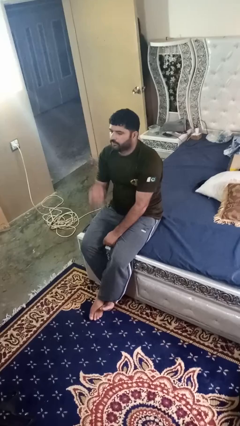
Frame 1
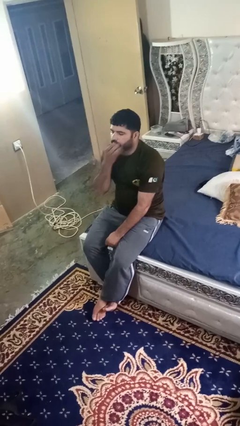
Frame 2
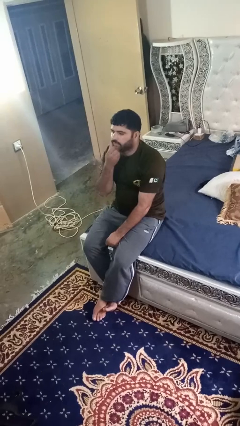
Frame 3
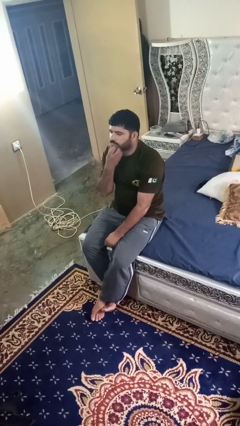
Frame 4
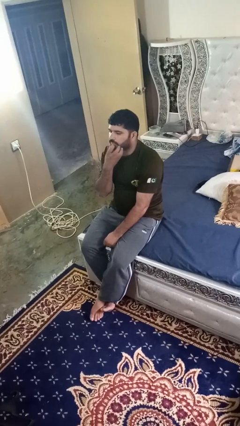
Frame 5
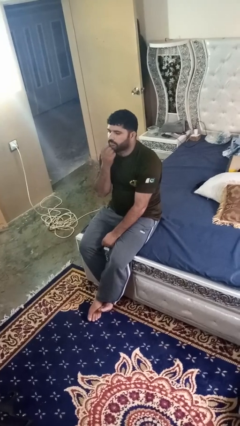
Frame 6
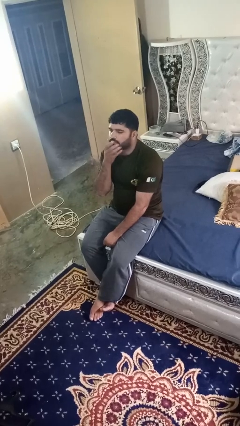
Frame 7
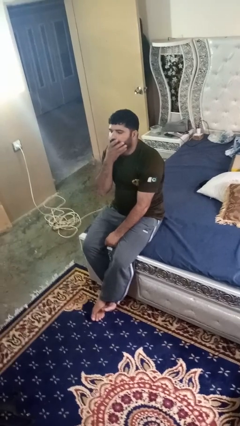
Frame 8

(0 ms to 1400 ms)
person strokes chin

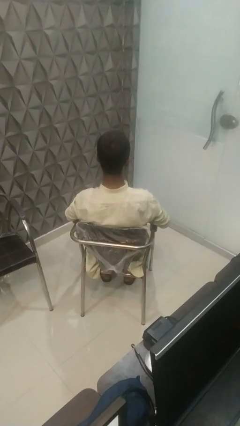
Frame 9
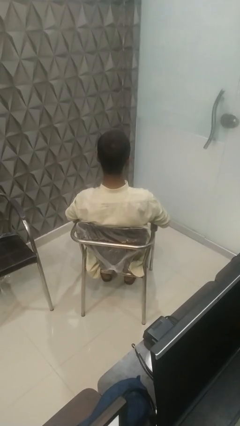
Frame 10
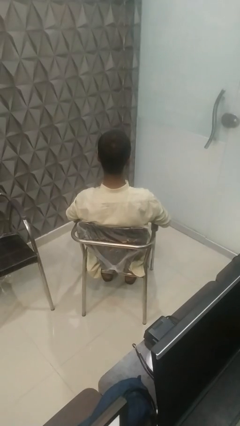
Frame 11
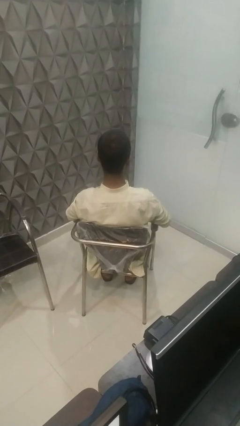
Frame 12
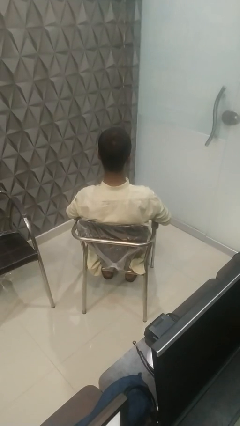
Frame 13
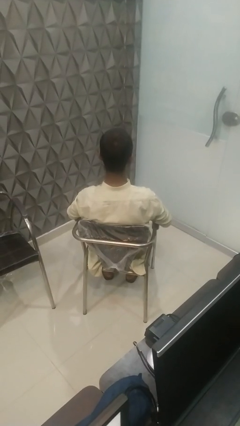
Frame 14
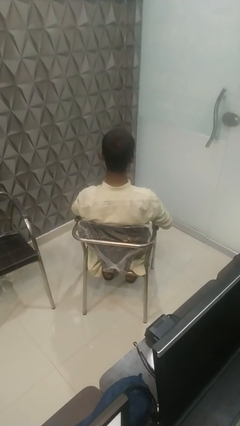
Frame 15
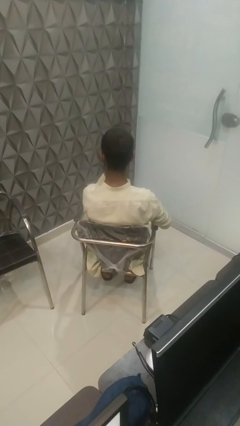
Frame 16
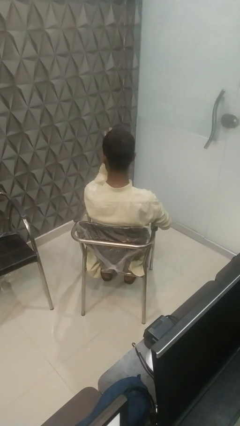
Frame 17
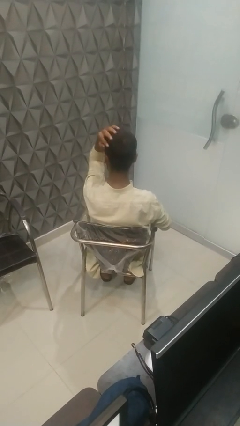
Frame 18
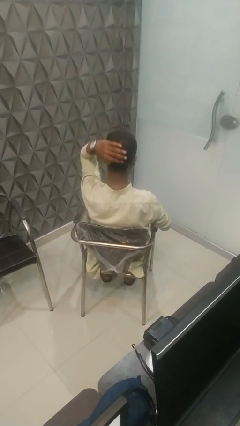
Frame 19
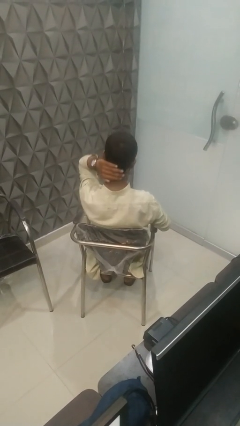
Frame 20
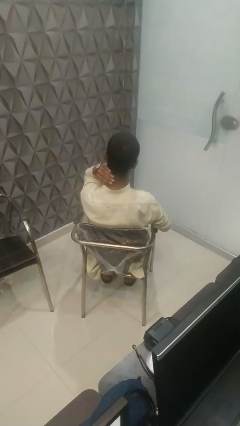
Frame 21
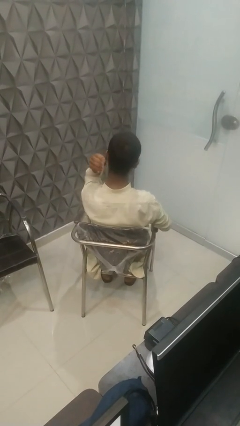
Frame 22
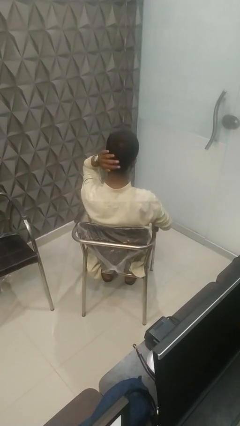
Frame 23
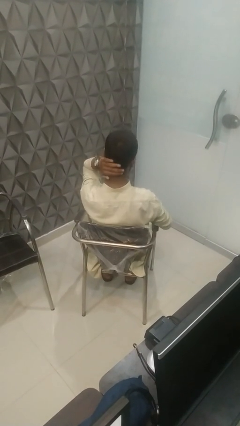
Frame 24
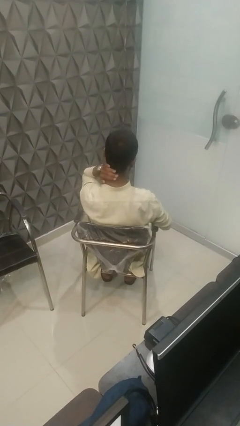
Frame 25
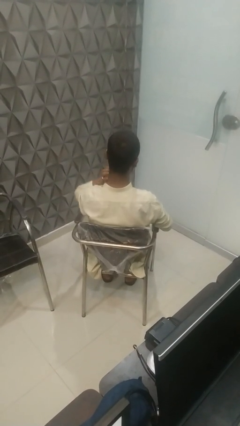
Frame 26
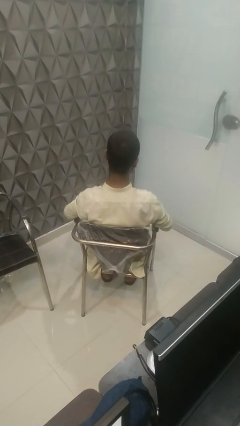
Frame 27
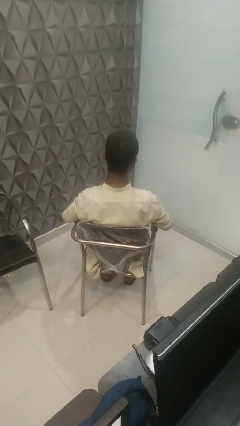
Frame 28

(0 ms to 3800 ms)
person strokes hair

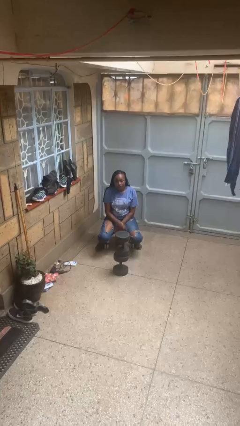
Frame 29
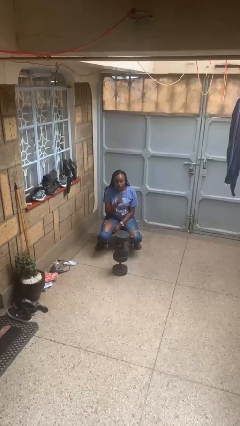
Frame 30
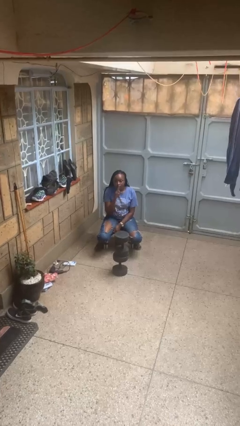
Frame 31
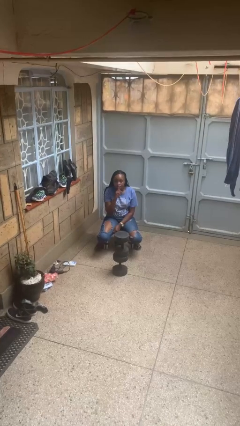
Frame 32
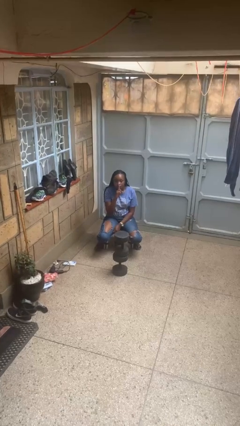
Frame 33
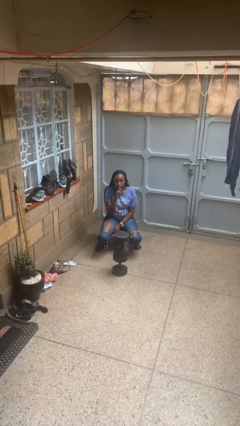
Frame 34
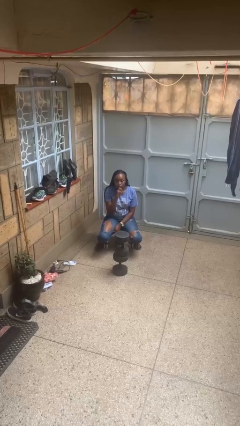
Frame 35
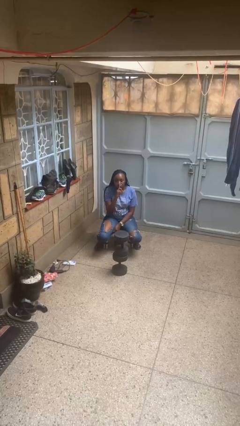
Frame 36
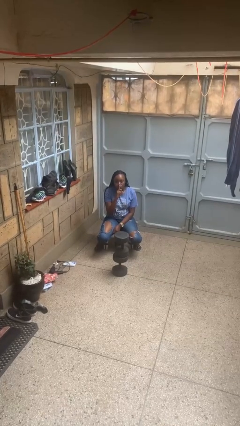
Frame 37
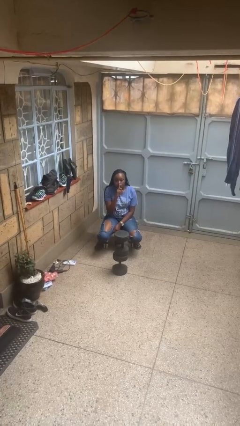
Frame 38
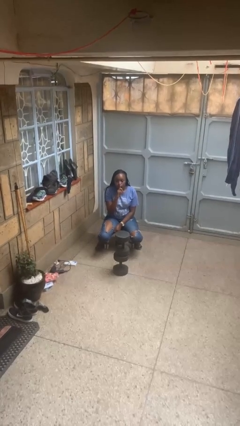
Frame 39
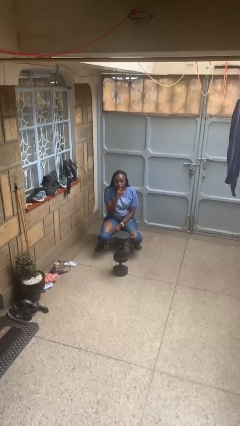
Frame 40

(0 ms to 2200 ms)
person gestures be quiet

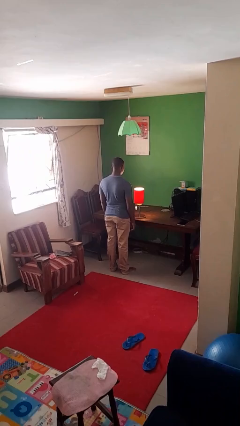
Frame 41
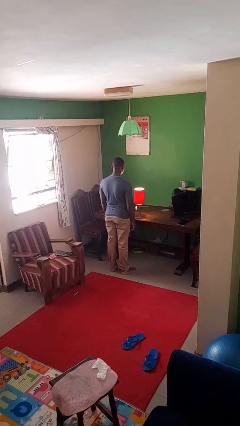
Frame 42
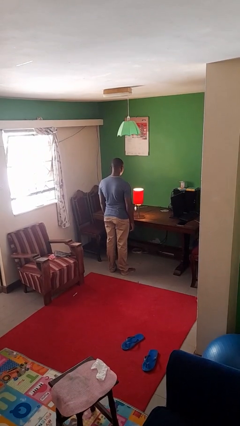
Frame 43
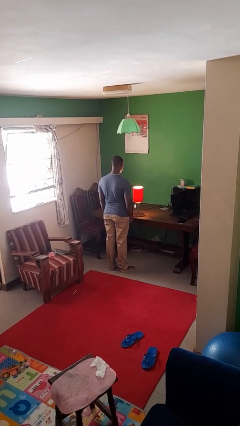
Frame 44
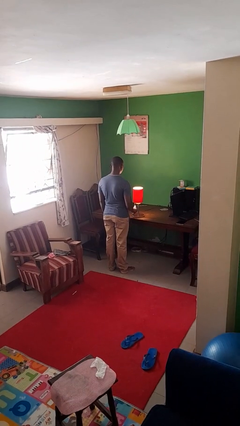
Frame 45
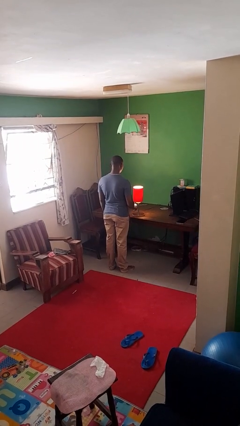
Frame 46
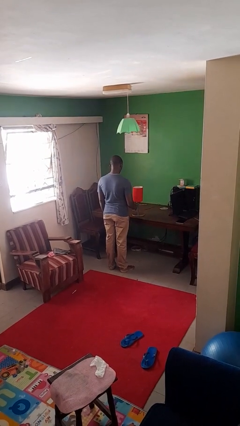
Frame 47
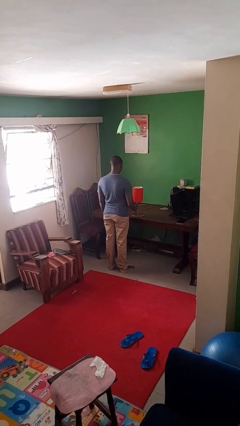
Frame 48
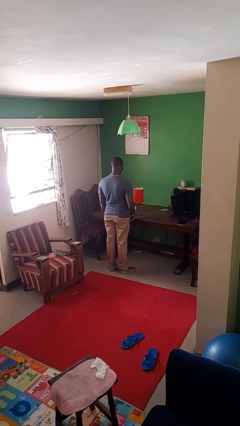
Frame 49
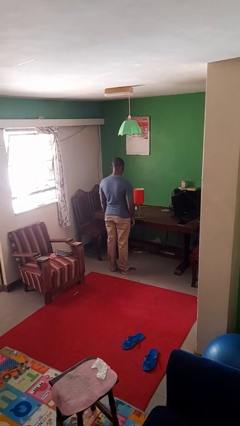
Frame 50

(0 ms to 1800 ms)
person turns off lamp

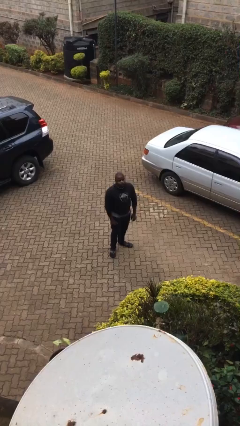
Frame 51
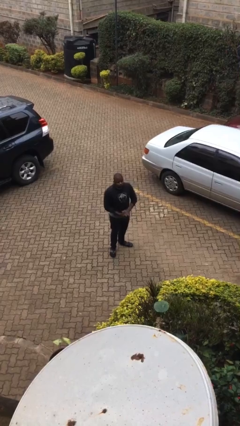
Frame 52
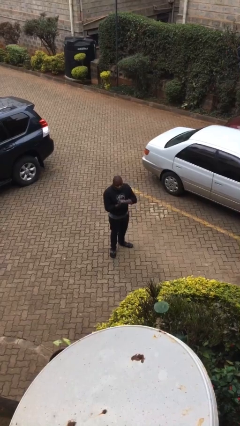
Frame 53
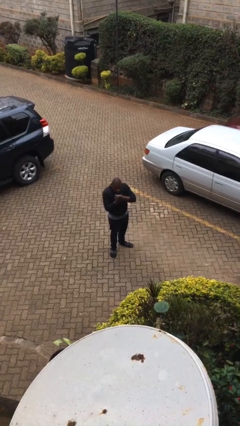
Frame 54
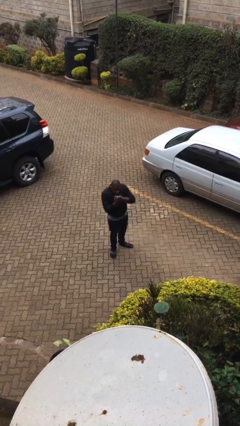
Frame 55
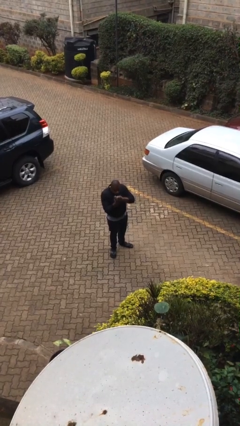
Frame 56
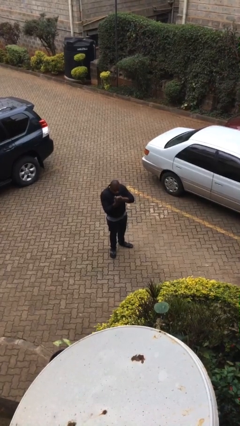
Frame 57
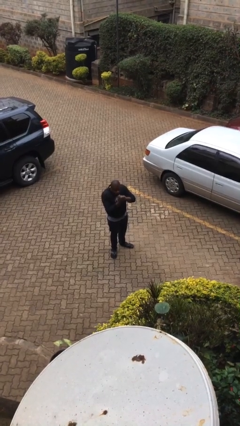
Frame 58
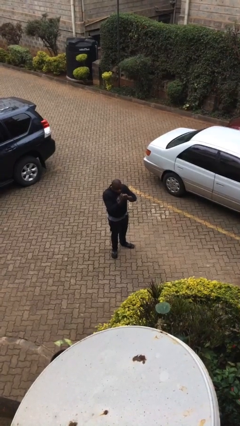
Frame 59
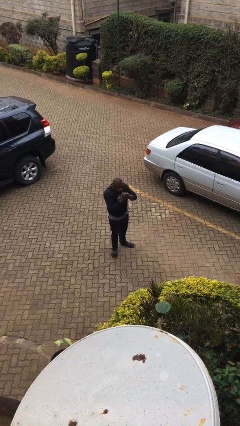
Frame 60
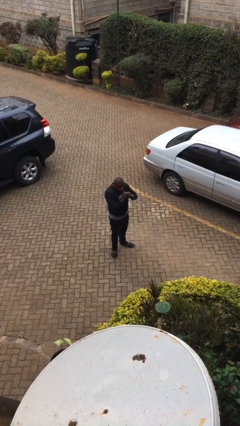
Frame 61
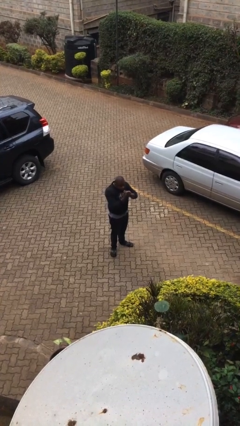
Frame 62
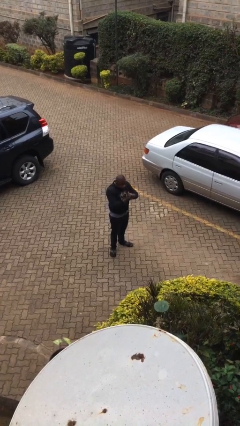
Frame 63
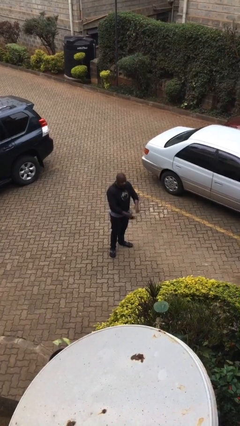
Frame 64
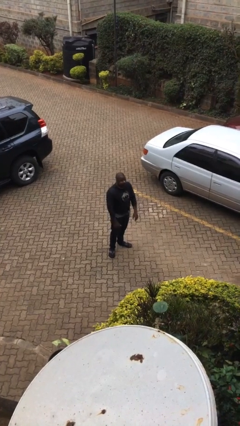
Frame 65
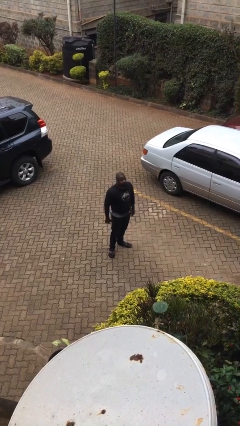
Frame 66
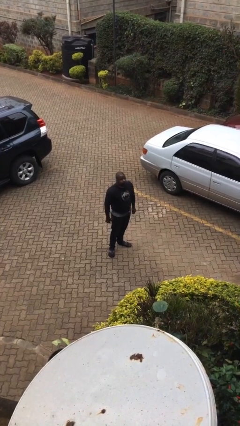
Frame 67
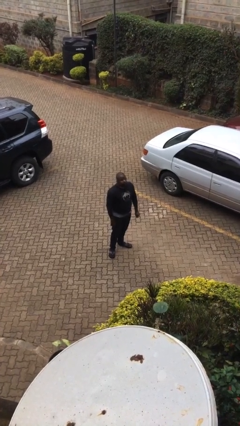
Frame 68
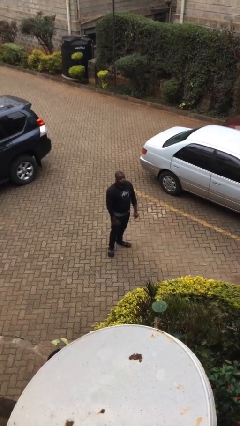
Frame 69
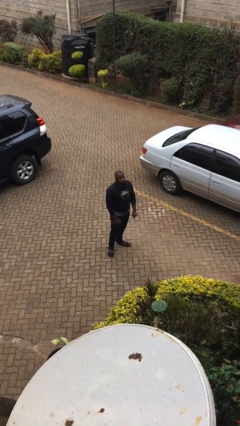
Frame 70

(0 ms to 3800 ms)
person blows into hands

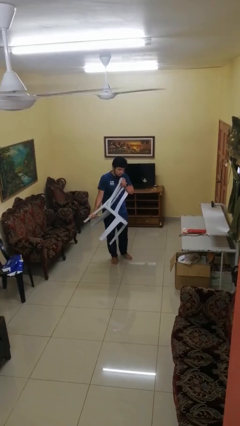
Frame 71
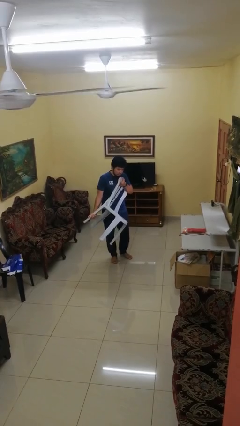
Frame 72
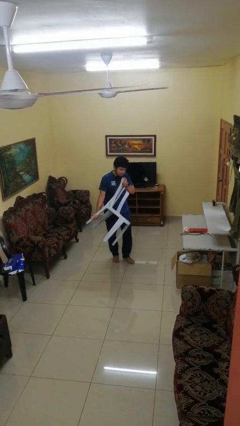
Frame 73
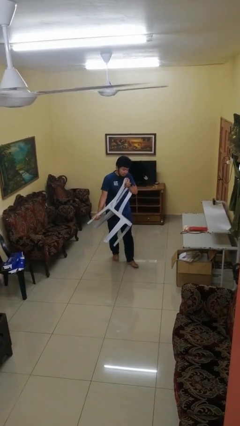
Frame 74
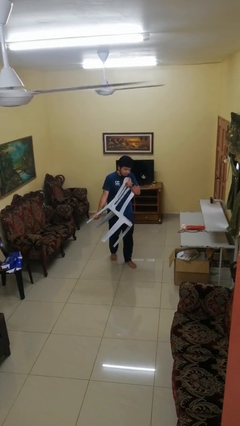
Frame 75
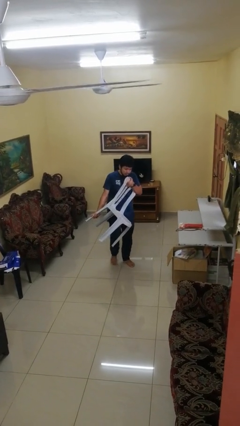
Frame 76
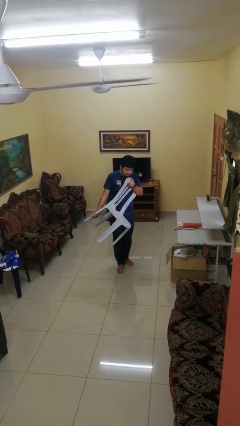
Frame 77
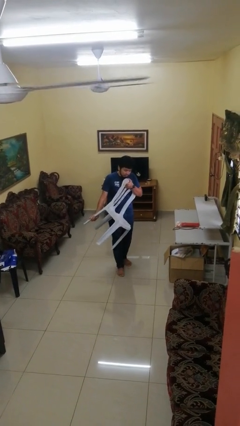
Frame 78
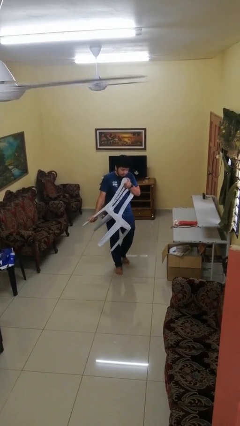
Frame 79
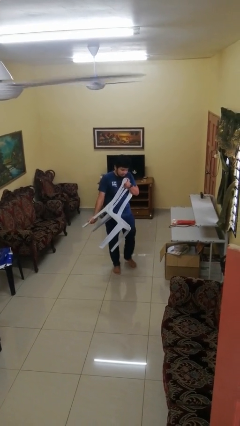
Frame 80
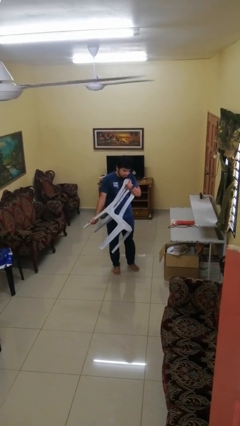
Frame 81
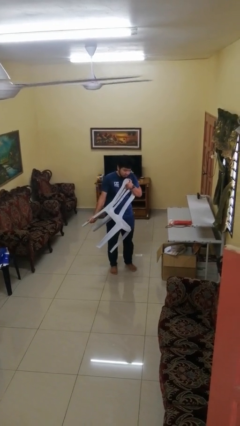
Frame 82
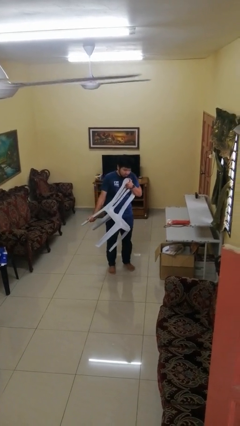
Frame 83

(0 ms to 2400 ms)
person carries furniture

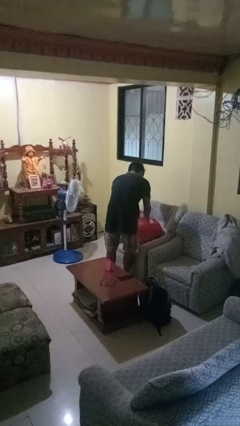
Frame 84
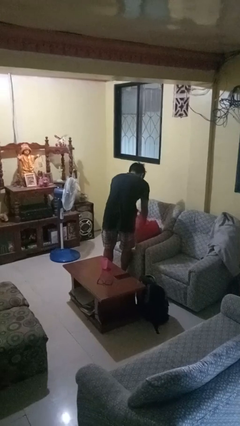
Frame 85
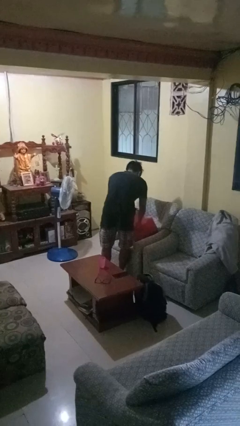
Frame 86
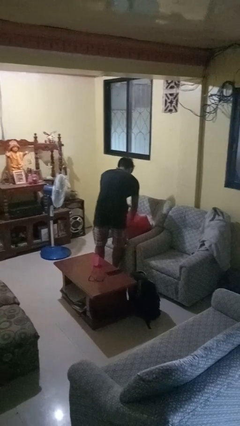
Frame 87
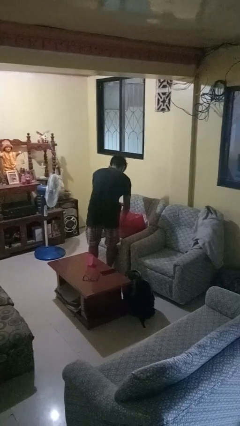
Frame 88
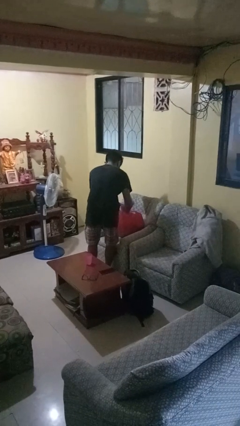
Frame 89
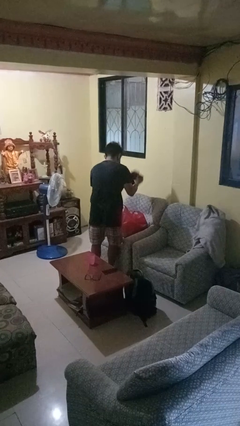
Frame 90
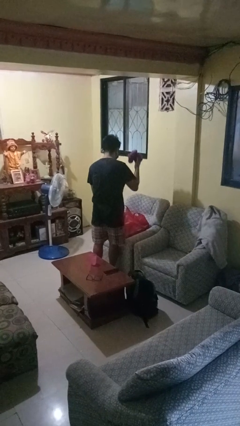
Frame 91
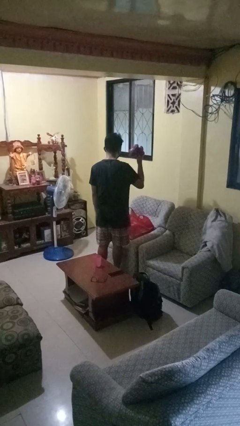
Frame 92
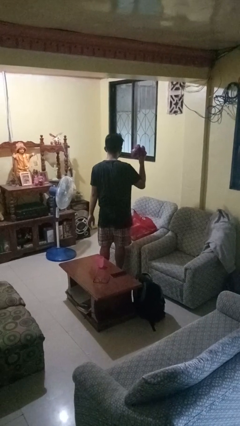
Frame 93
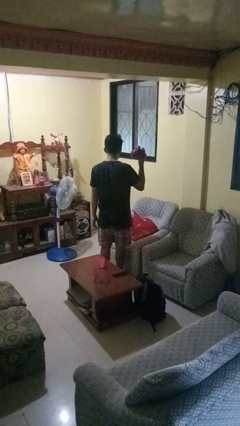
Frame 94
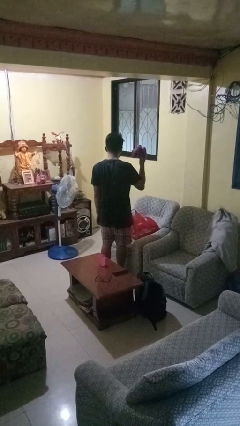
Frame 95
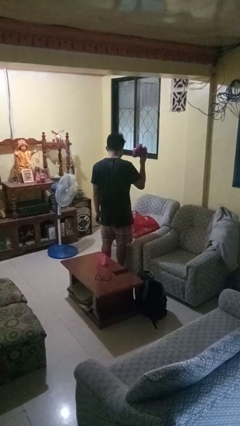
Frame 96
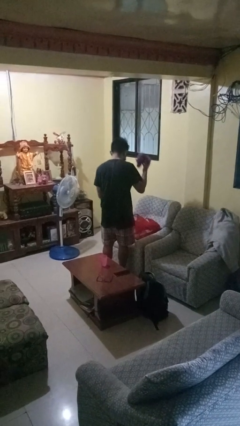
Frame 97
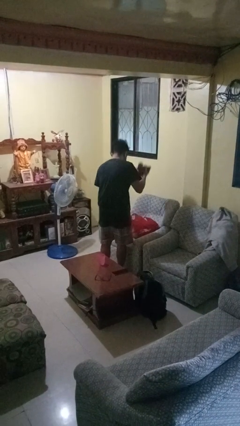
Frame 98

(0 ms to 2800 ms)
person takes object from bag
